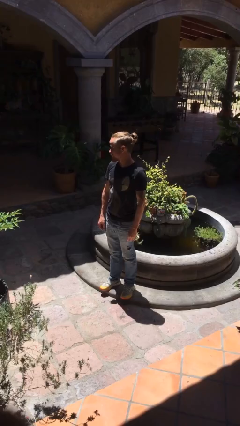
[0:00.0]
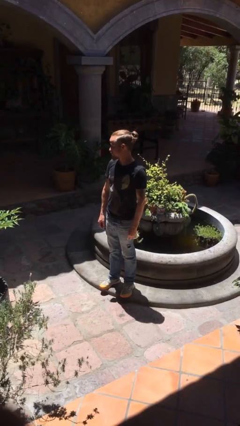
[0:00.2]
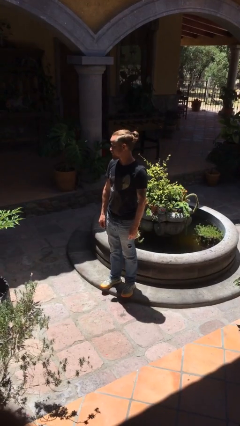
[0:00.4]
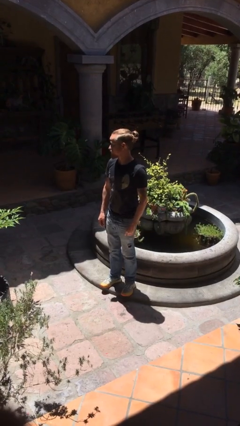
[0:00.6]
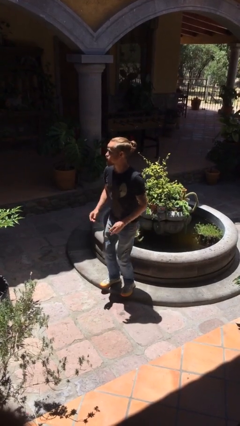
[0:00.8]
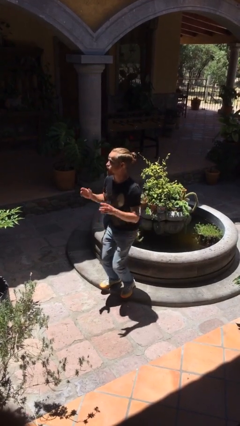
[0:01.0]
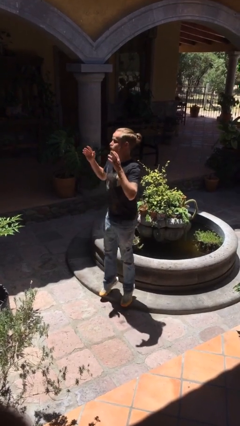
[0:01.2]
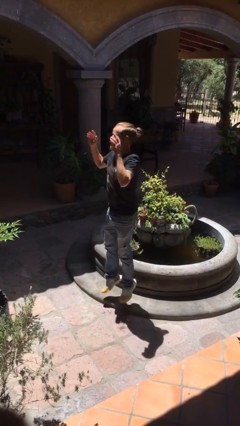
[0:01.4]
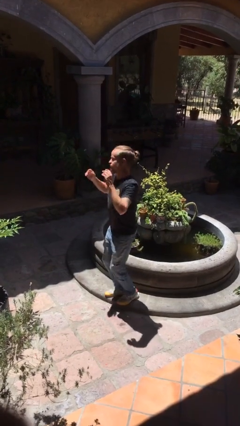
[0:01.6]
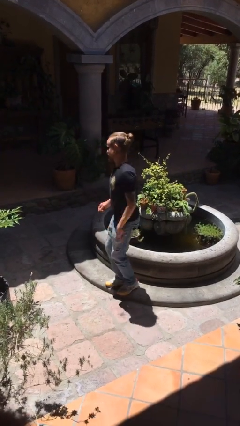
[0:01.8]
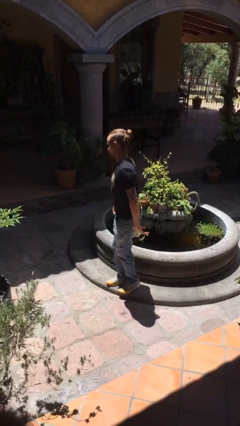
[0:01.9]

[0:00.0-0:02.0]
person jumps

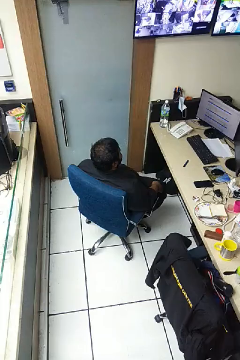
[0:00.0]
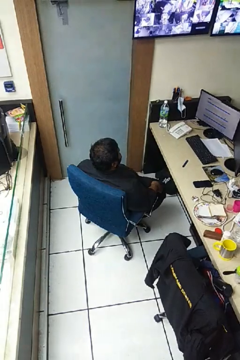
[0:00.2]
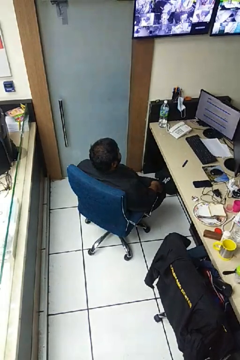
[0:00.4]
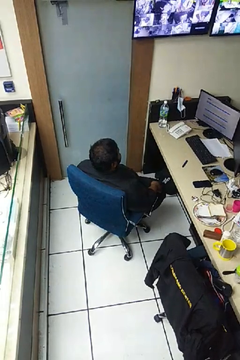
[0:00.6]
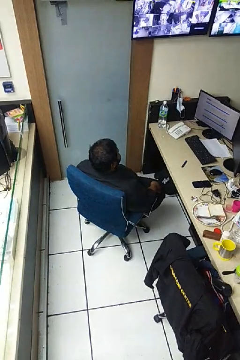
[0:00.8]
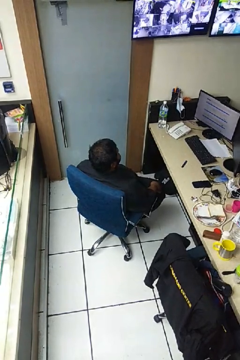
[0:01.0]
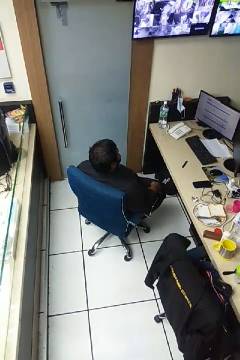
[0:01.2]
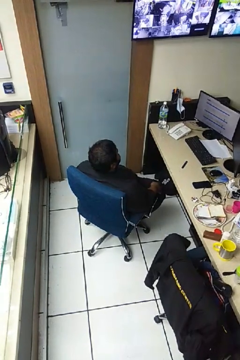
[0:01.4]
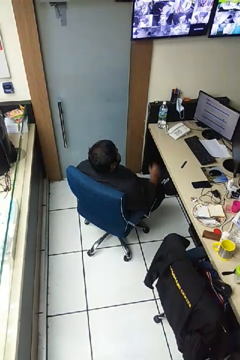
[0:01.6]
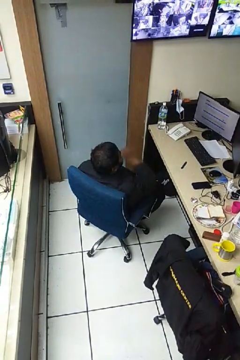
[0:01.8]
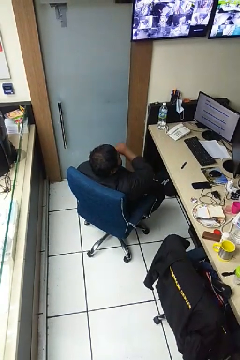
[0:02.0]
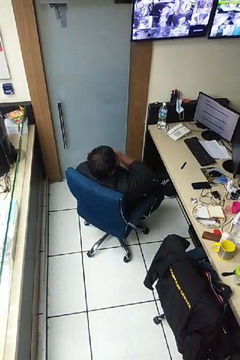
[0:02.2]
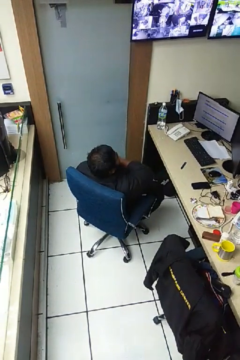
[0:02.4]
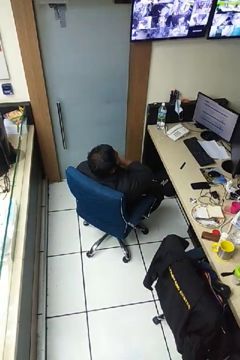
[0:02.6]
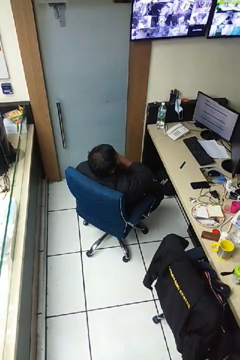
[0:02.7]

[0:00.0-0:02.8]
person drums on chest

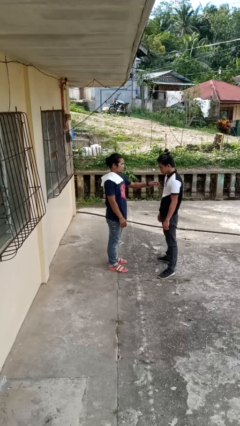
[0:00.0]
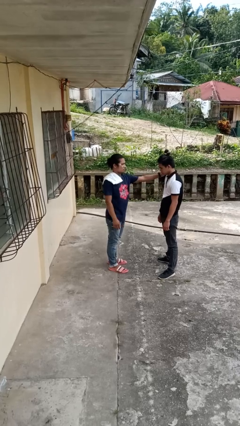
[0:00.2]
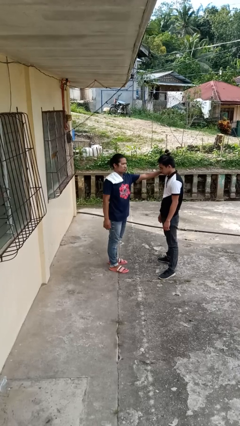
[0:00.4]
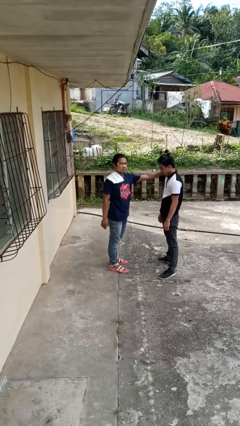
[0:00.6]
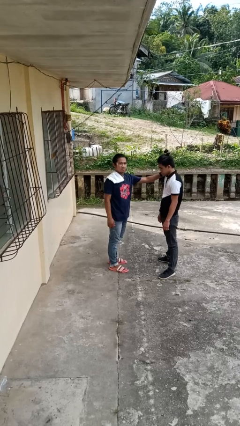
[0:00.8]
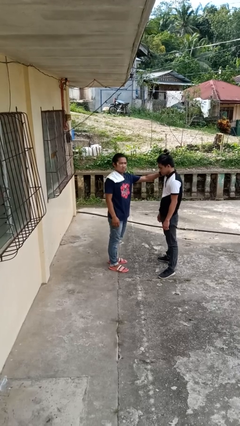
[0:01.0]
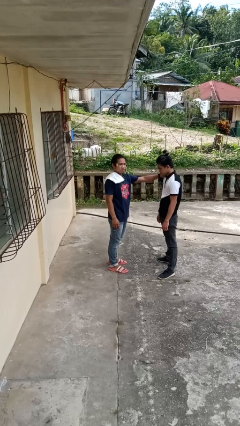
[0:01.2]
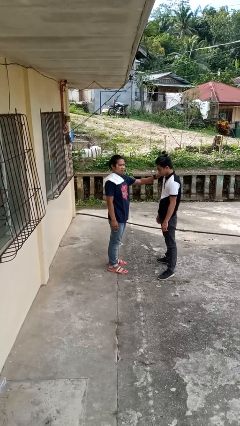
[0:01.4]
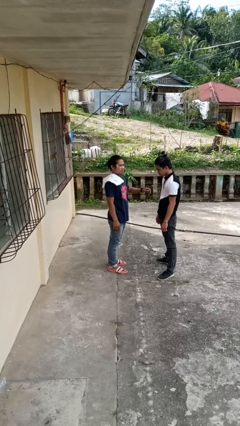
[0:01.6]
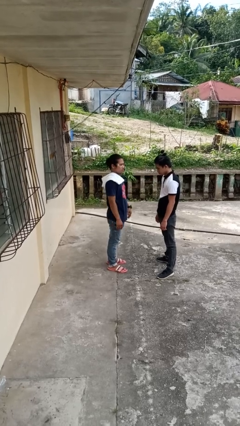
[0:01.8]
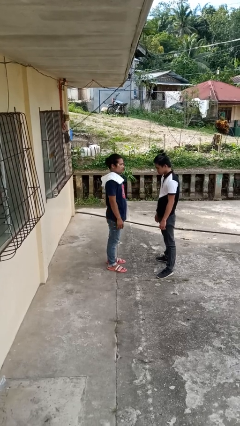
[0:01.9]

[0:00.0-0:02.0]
person pounds shoulders of person

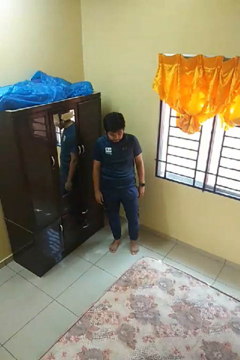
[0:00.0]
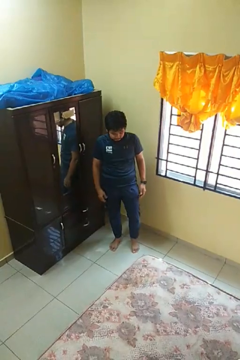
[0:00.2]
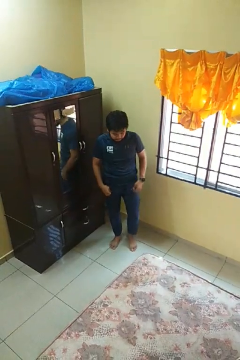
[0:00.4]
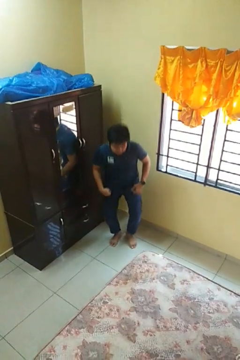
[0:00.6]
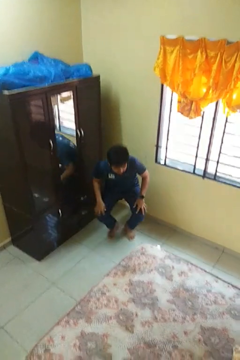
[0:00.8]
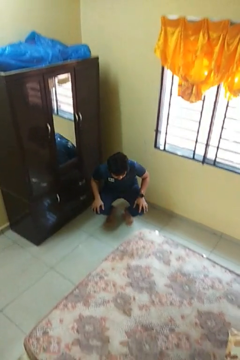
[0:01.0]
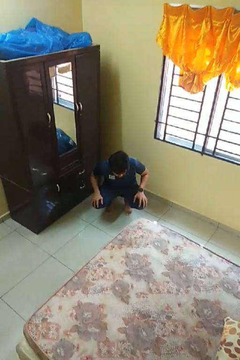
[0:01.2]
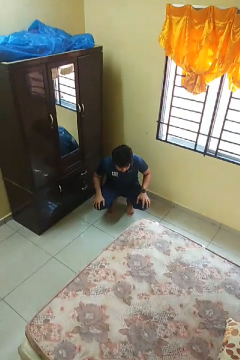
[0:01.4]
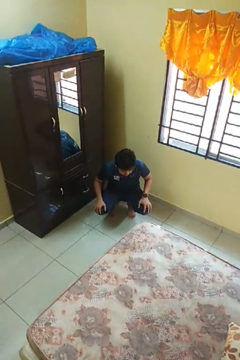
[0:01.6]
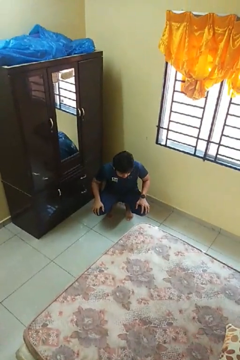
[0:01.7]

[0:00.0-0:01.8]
person squats

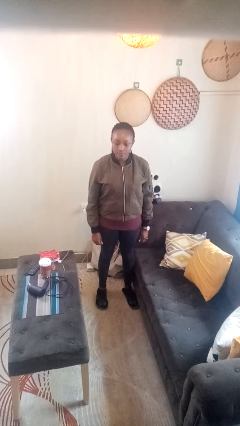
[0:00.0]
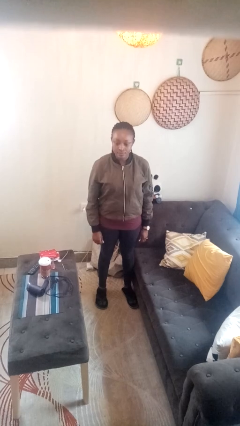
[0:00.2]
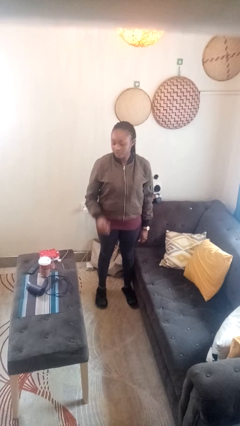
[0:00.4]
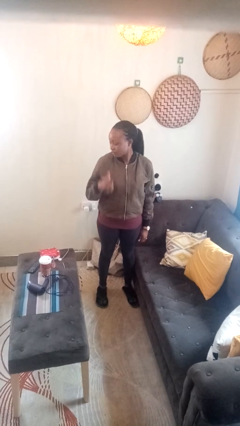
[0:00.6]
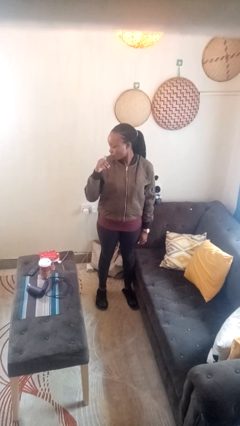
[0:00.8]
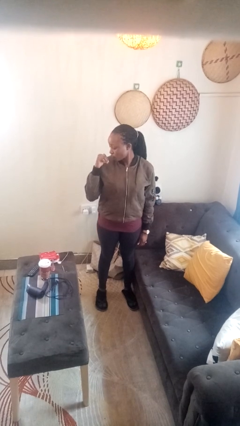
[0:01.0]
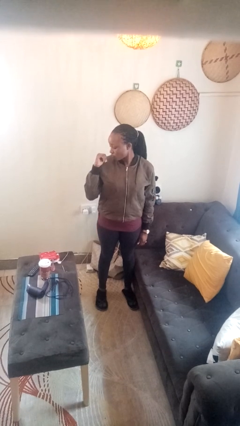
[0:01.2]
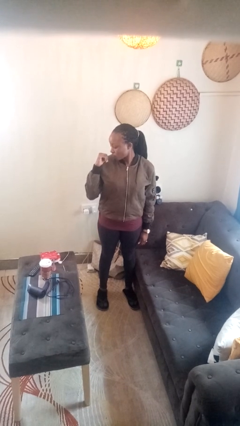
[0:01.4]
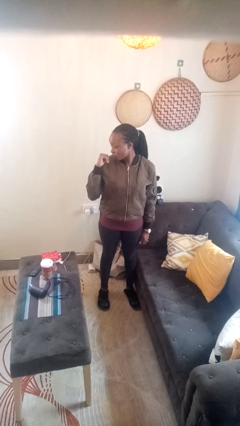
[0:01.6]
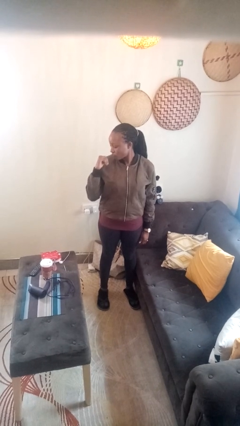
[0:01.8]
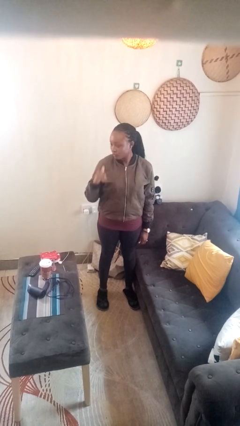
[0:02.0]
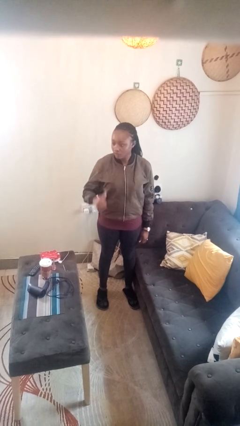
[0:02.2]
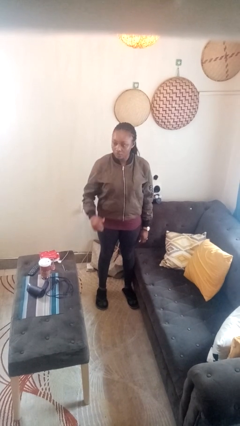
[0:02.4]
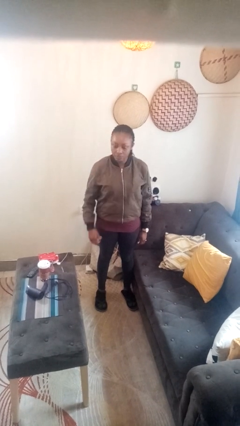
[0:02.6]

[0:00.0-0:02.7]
person gestures behind me

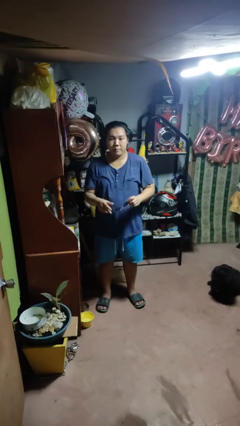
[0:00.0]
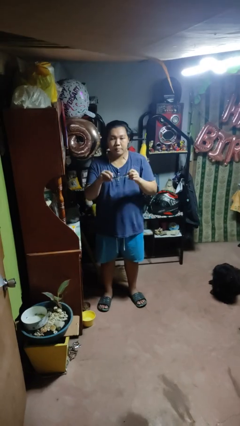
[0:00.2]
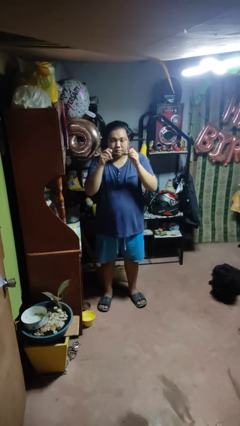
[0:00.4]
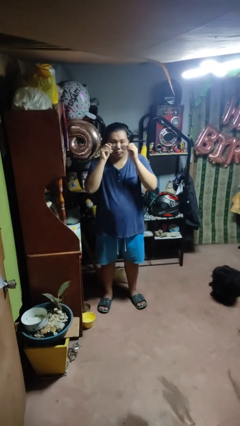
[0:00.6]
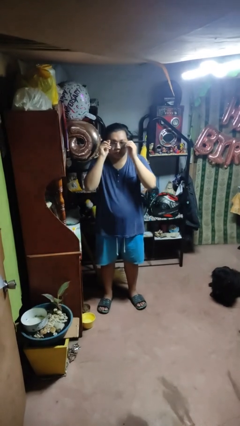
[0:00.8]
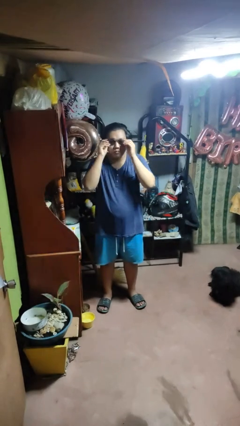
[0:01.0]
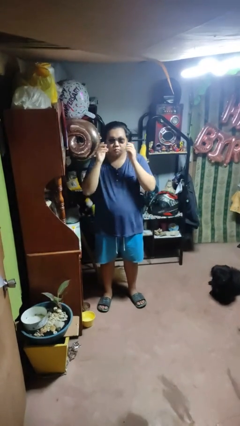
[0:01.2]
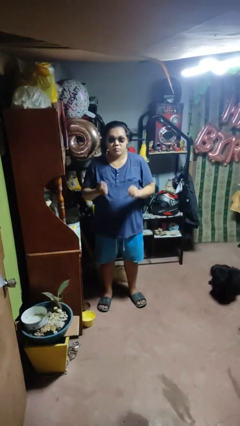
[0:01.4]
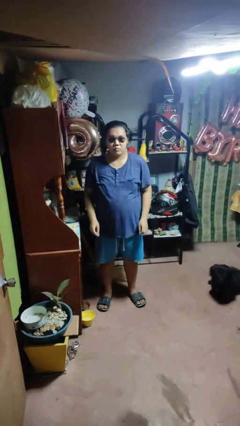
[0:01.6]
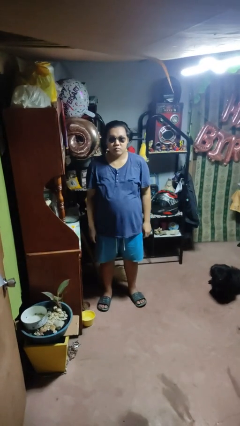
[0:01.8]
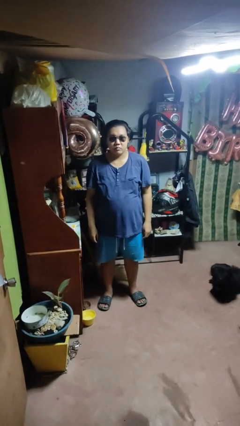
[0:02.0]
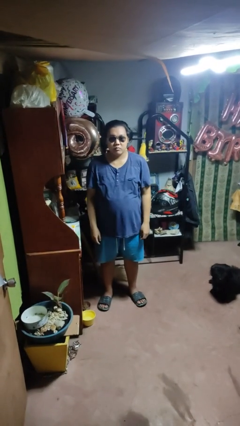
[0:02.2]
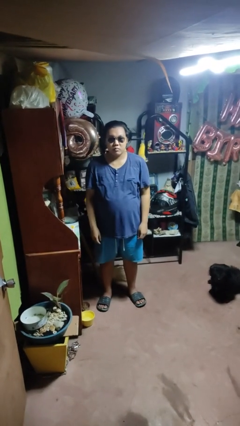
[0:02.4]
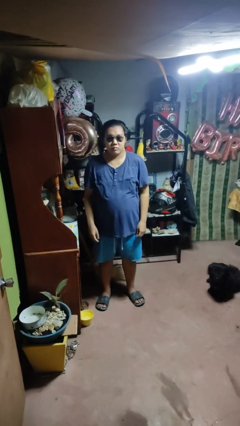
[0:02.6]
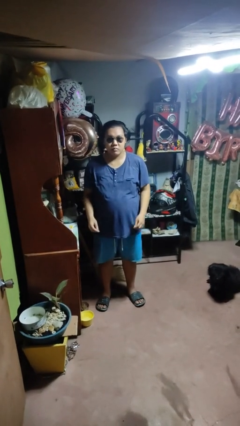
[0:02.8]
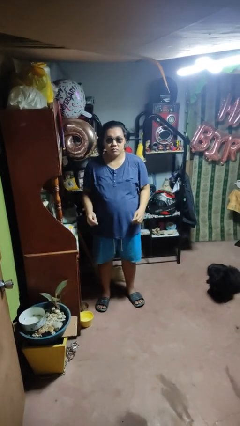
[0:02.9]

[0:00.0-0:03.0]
person puts on sunglasses

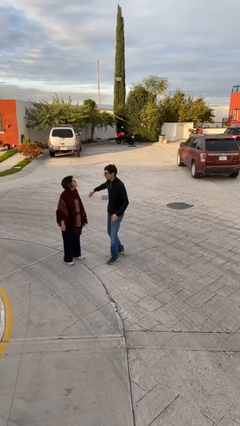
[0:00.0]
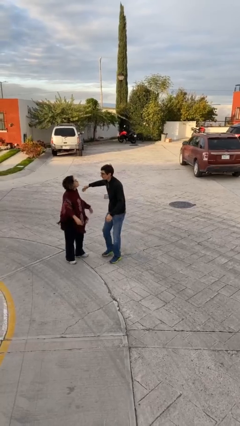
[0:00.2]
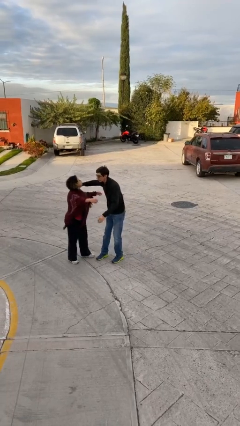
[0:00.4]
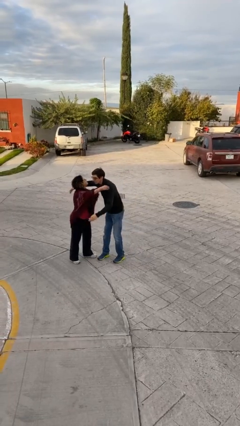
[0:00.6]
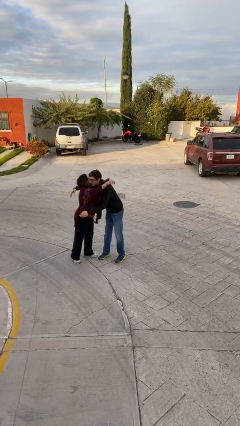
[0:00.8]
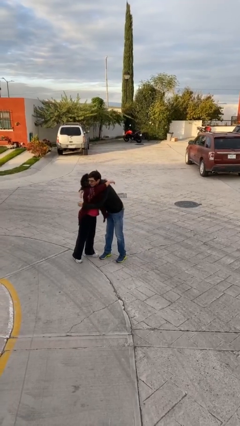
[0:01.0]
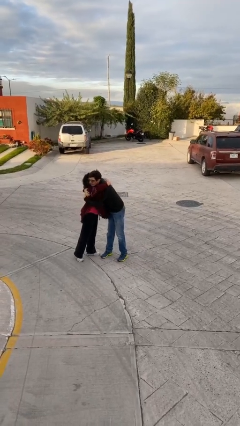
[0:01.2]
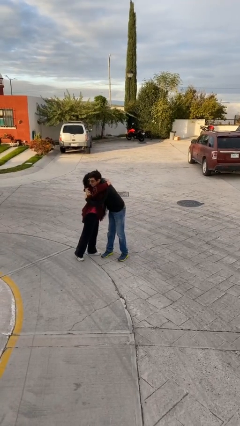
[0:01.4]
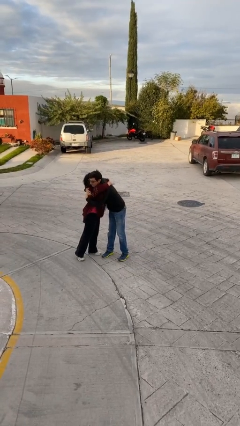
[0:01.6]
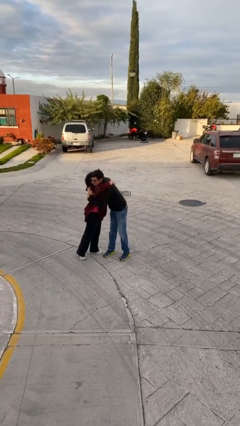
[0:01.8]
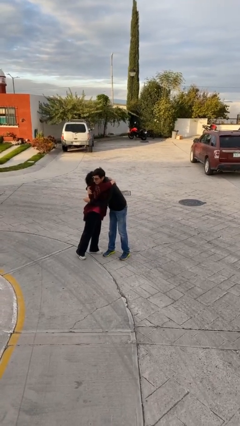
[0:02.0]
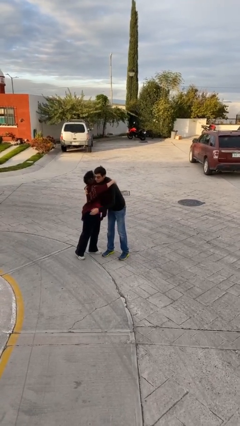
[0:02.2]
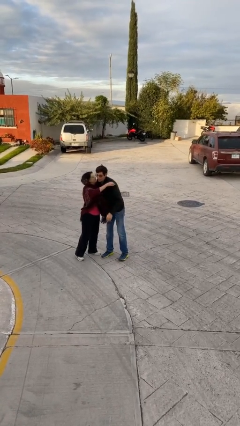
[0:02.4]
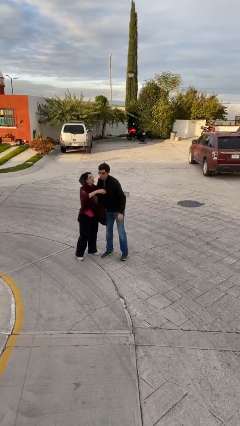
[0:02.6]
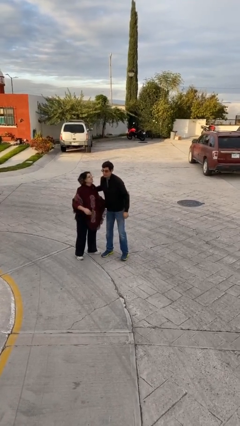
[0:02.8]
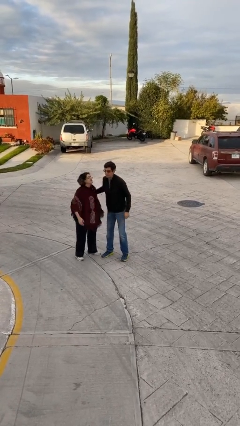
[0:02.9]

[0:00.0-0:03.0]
person embraces person

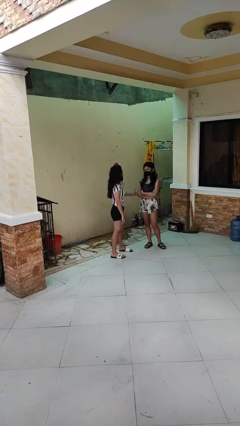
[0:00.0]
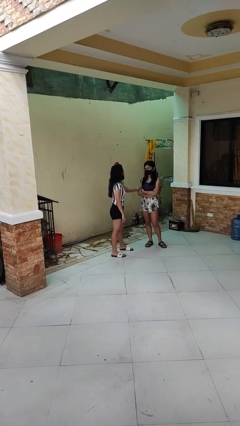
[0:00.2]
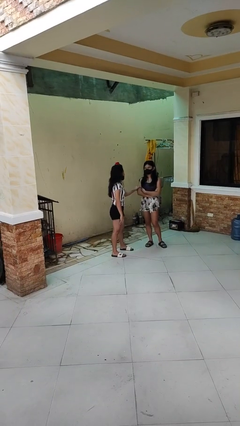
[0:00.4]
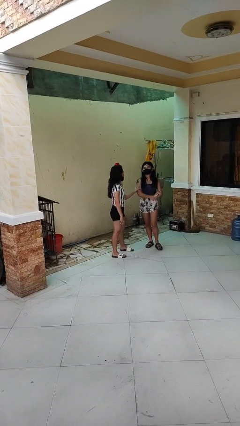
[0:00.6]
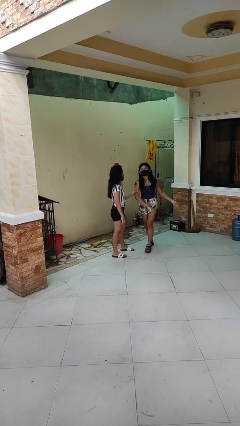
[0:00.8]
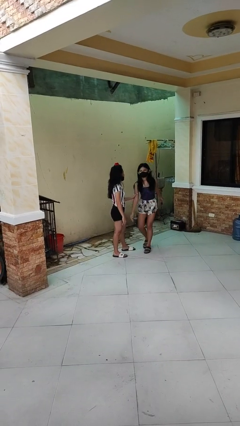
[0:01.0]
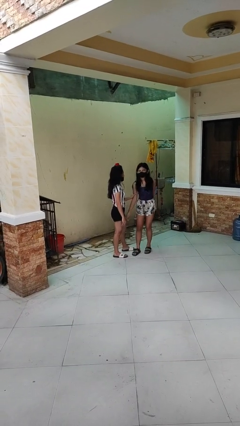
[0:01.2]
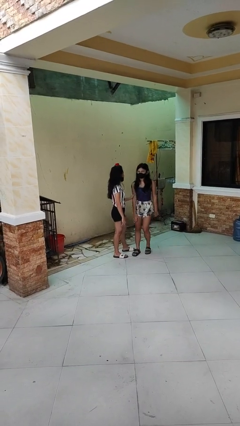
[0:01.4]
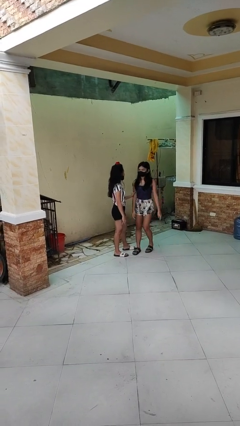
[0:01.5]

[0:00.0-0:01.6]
person grabs person by bicep
